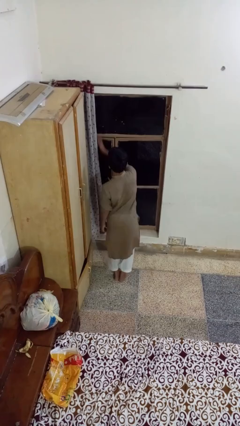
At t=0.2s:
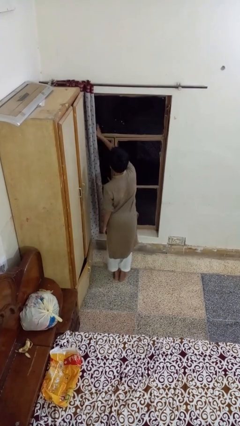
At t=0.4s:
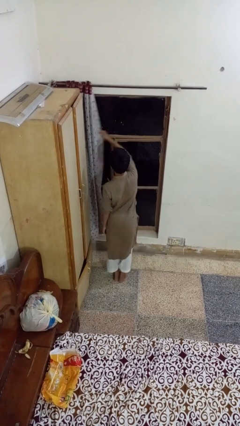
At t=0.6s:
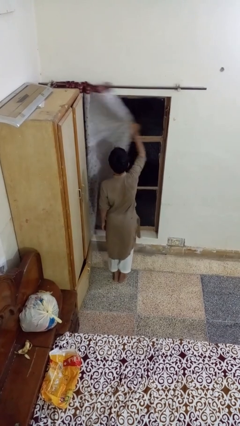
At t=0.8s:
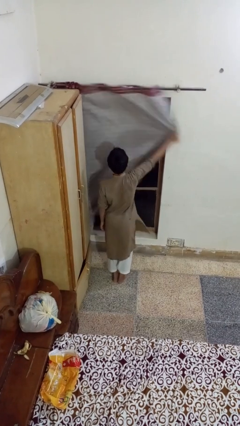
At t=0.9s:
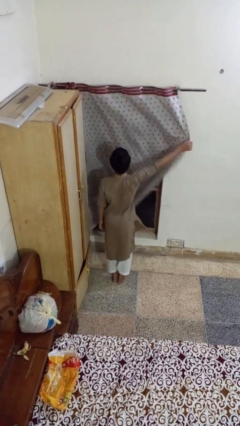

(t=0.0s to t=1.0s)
person closes curtains

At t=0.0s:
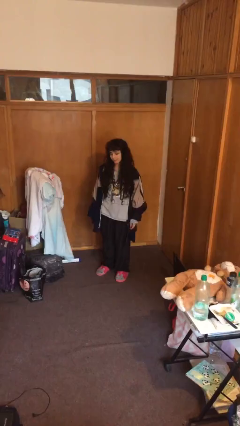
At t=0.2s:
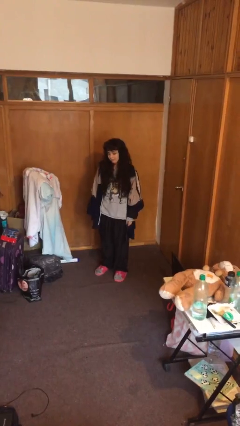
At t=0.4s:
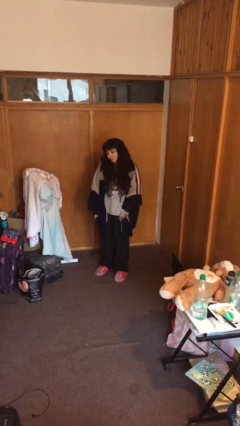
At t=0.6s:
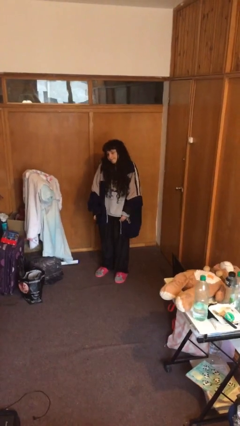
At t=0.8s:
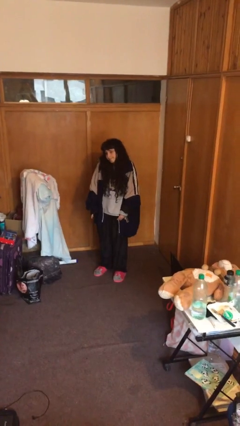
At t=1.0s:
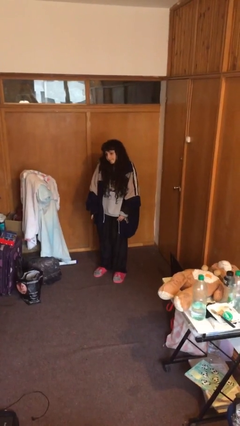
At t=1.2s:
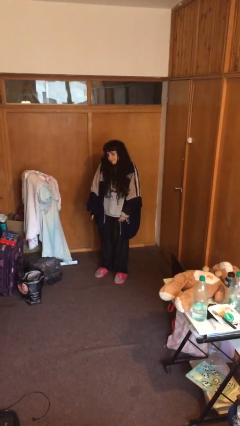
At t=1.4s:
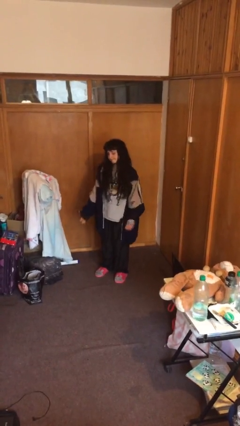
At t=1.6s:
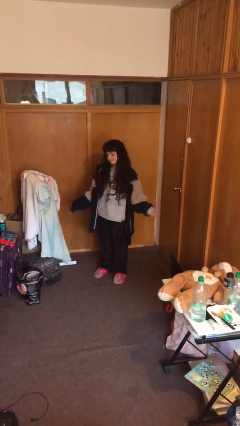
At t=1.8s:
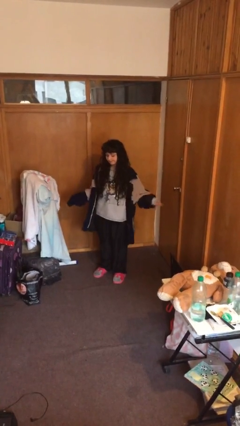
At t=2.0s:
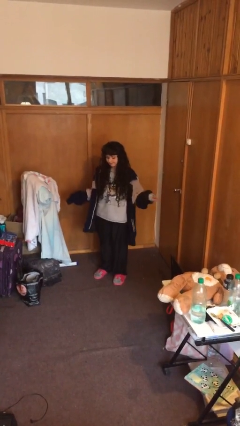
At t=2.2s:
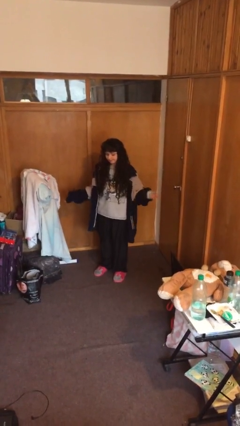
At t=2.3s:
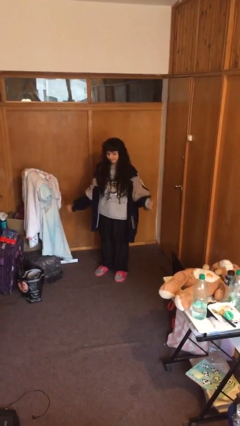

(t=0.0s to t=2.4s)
person shrugs

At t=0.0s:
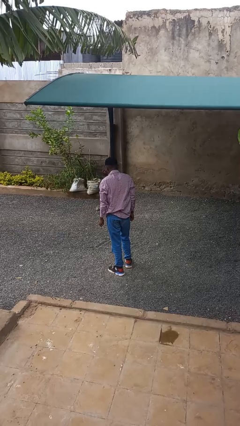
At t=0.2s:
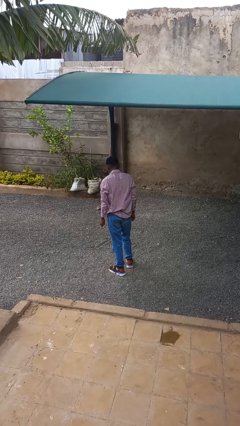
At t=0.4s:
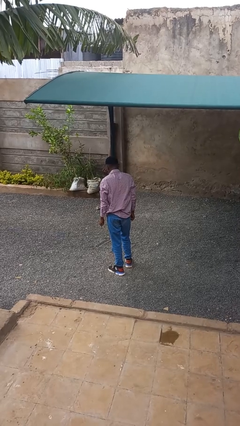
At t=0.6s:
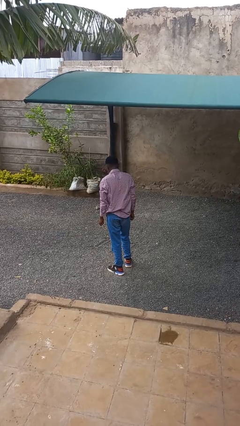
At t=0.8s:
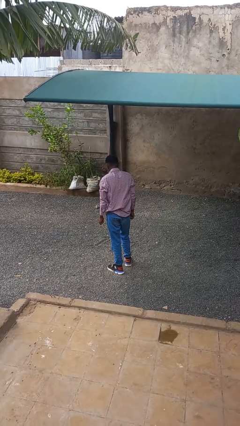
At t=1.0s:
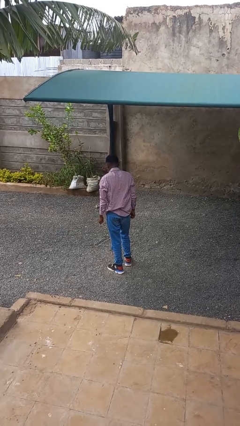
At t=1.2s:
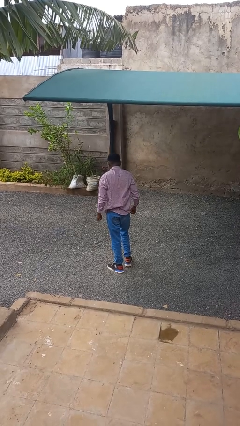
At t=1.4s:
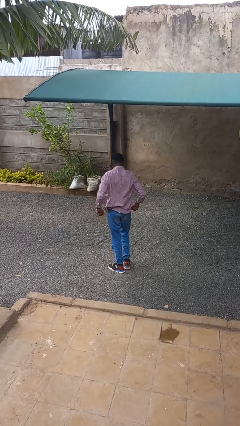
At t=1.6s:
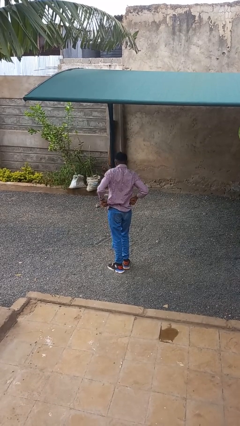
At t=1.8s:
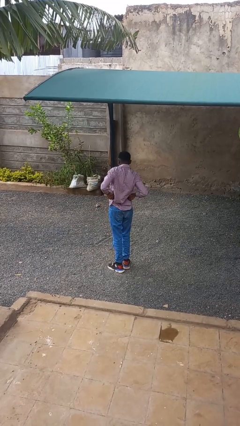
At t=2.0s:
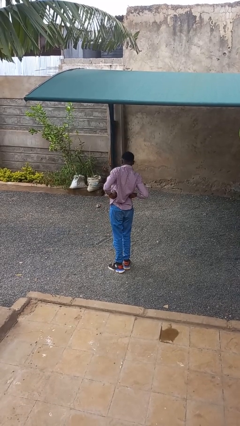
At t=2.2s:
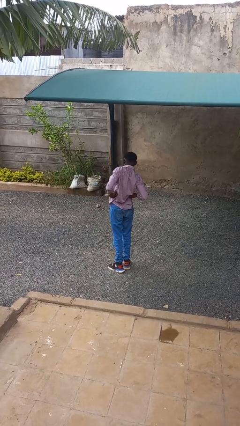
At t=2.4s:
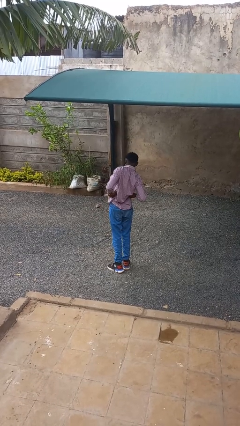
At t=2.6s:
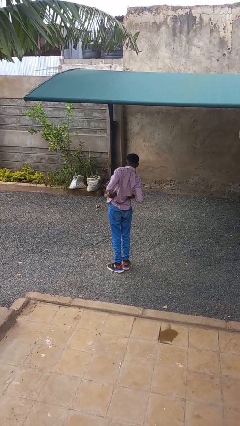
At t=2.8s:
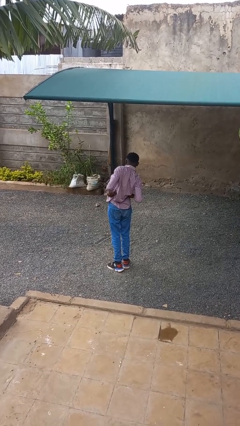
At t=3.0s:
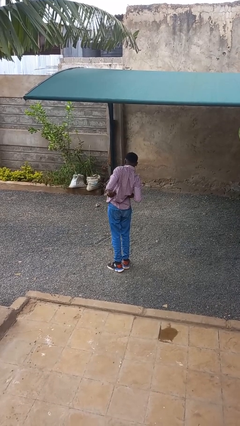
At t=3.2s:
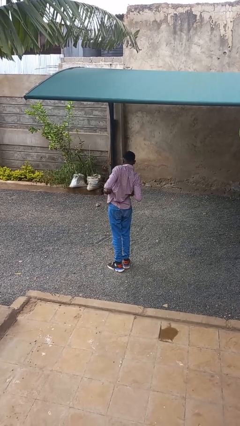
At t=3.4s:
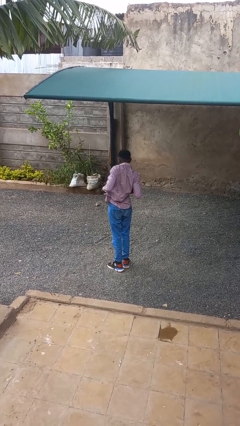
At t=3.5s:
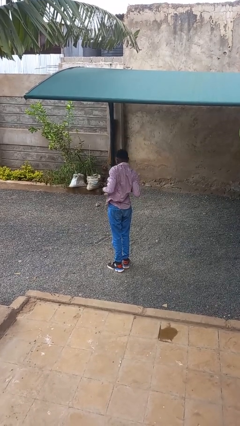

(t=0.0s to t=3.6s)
person stretches back

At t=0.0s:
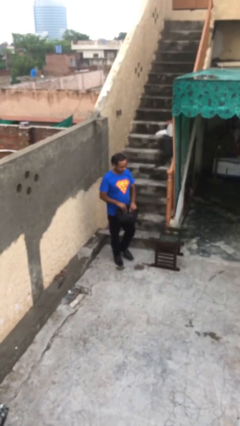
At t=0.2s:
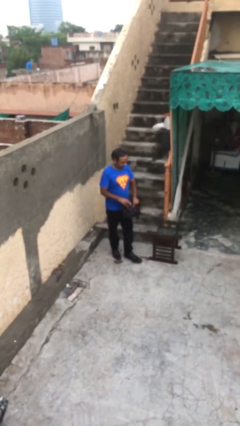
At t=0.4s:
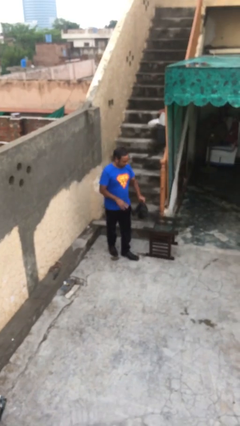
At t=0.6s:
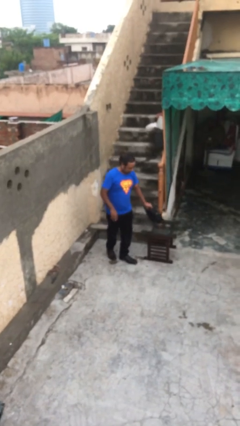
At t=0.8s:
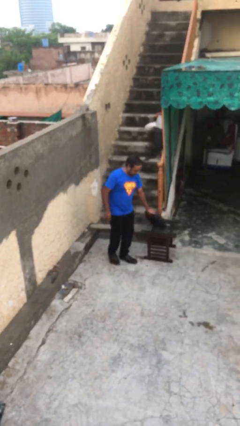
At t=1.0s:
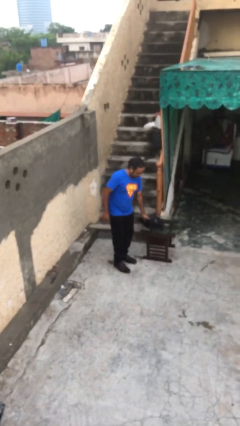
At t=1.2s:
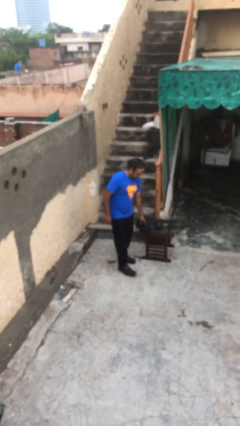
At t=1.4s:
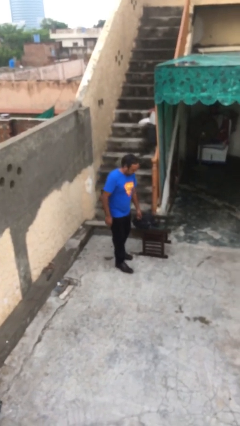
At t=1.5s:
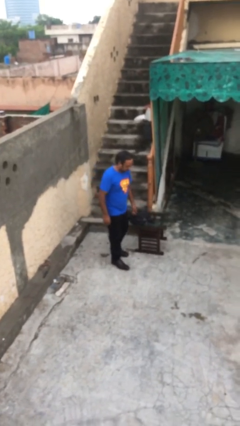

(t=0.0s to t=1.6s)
person puts down object on table

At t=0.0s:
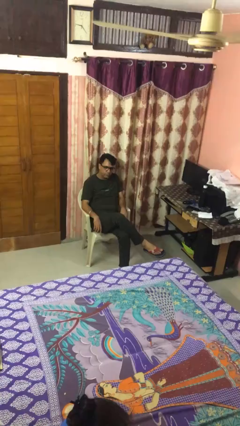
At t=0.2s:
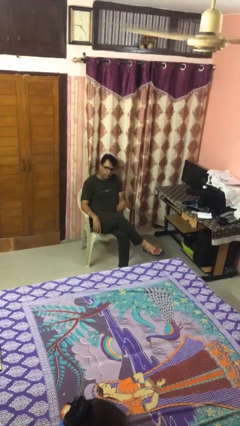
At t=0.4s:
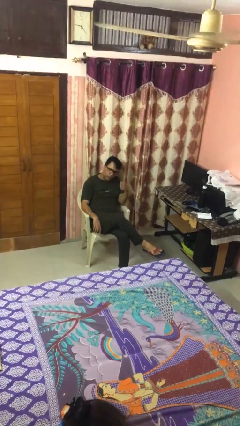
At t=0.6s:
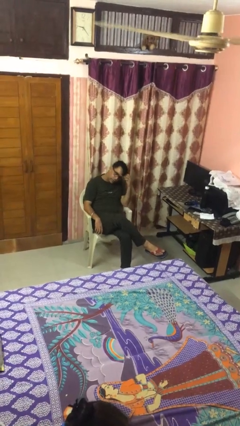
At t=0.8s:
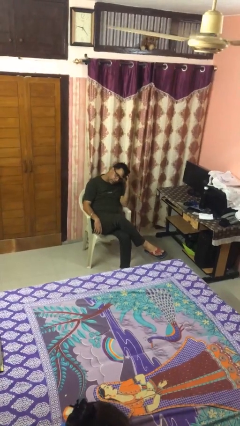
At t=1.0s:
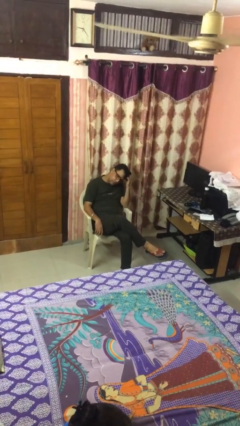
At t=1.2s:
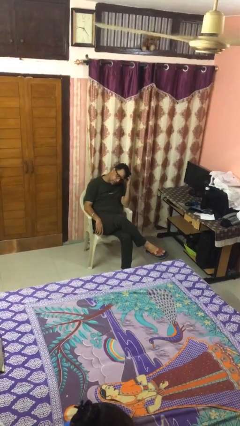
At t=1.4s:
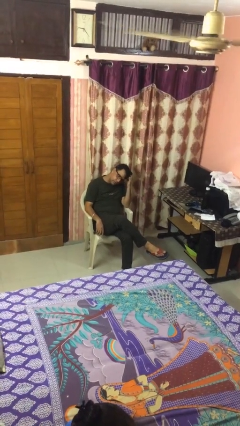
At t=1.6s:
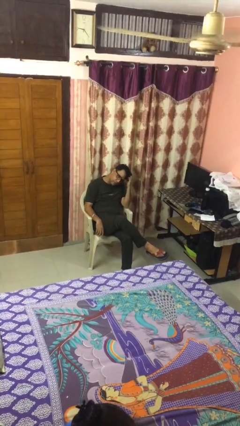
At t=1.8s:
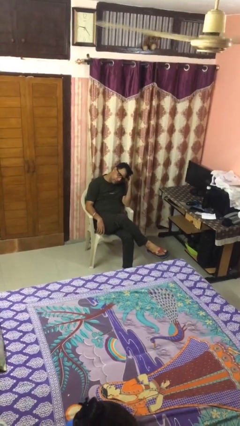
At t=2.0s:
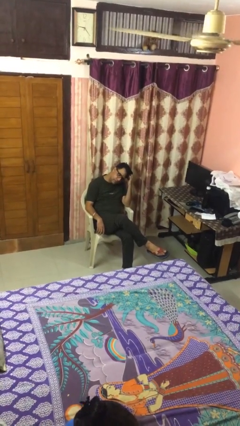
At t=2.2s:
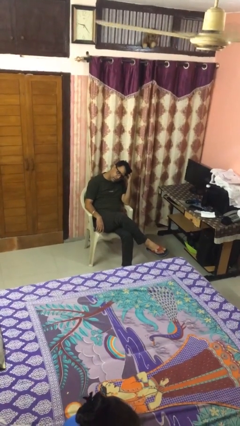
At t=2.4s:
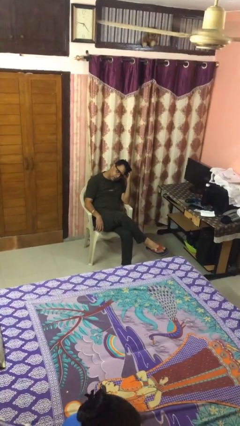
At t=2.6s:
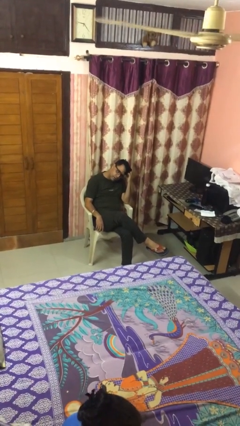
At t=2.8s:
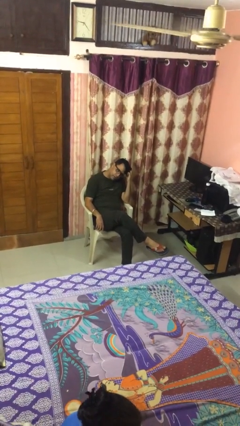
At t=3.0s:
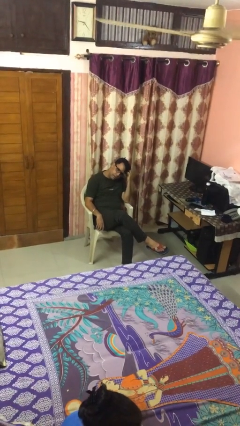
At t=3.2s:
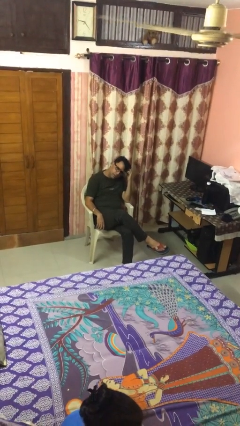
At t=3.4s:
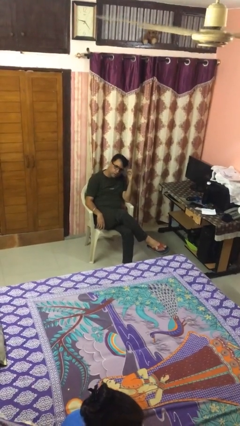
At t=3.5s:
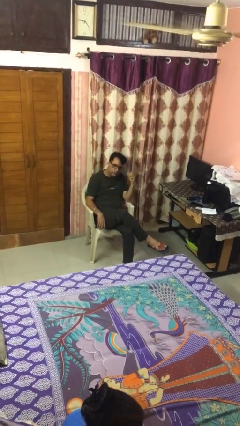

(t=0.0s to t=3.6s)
person scratches face

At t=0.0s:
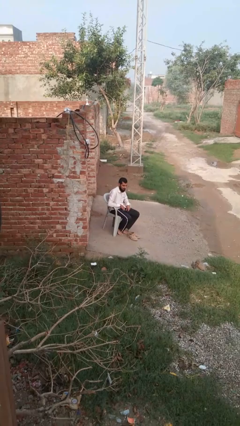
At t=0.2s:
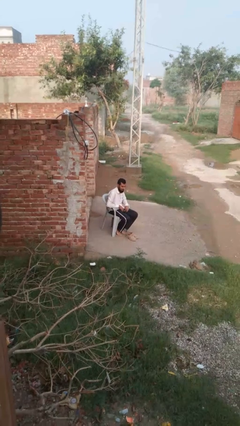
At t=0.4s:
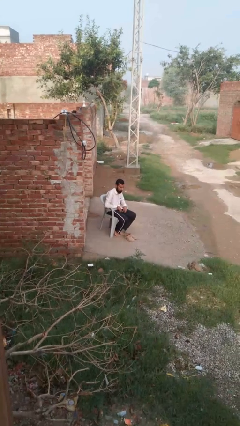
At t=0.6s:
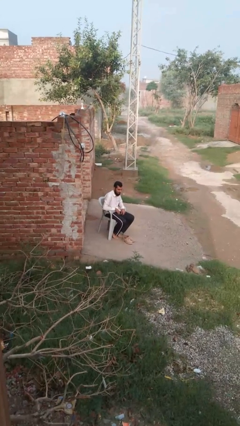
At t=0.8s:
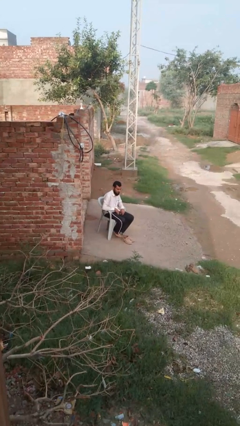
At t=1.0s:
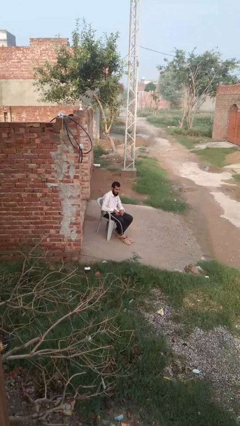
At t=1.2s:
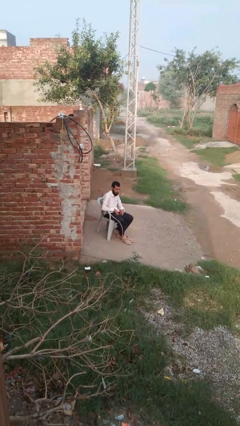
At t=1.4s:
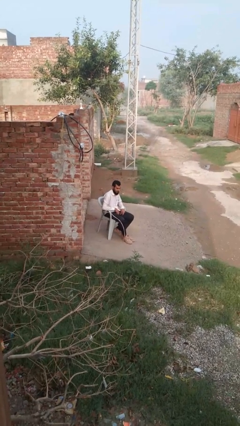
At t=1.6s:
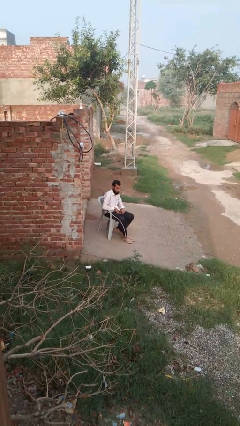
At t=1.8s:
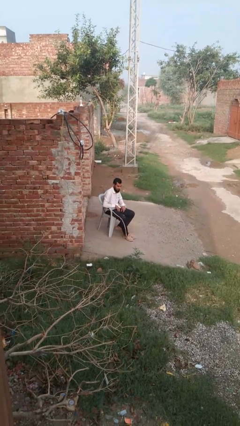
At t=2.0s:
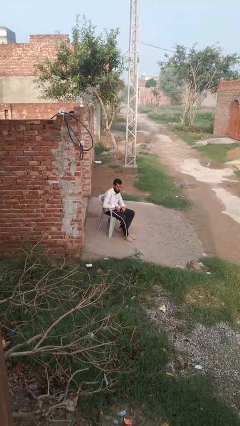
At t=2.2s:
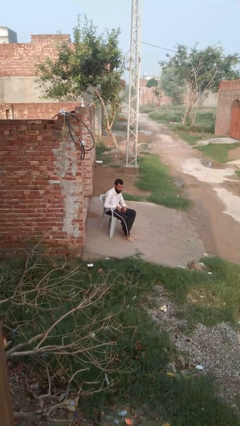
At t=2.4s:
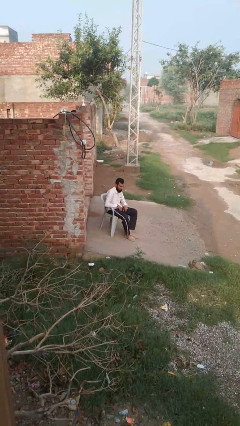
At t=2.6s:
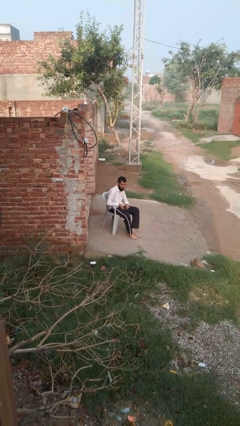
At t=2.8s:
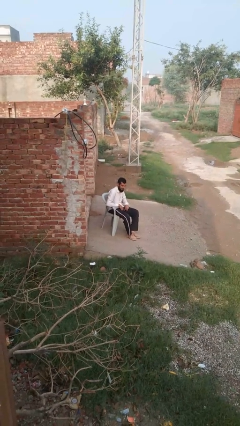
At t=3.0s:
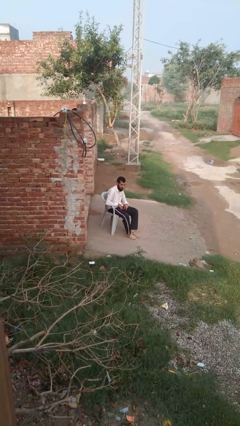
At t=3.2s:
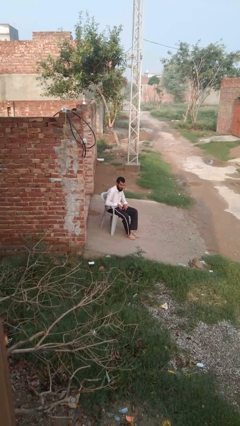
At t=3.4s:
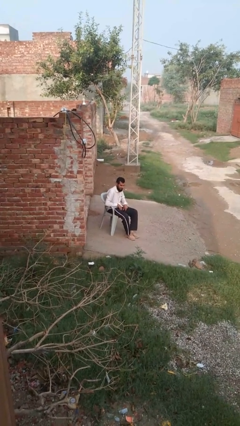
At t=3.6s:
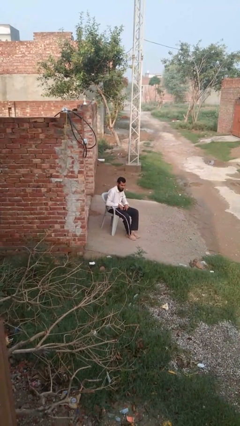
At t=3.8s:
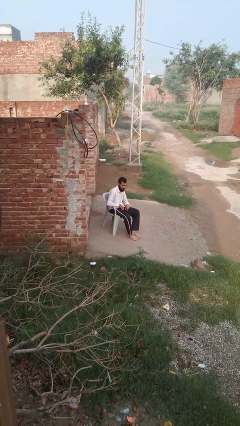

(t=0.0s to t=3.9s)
person puts on shoes

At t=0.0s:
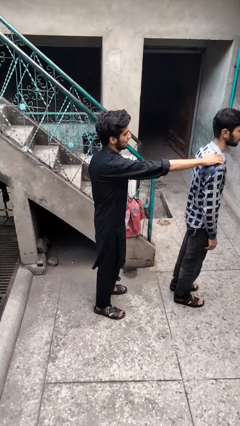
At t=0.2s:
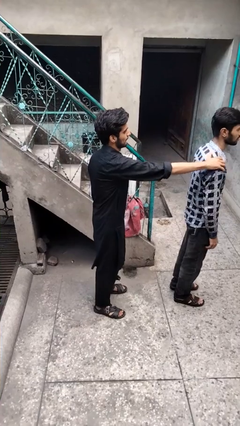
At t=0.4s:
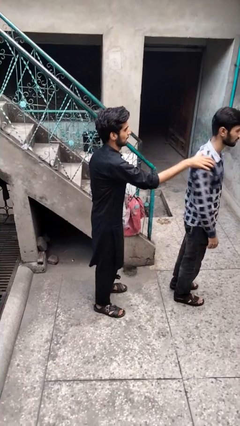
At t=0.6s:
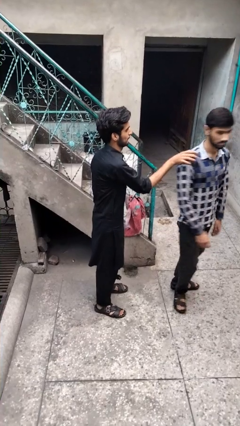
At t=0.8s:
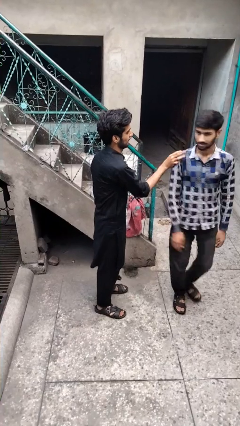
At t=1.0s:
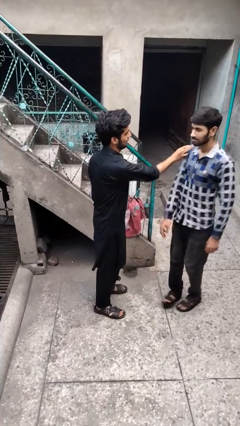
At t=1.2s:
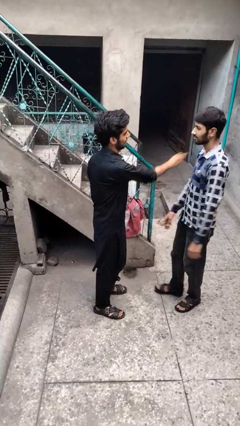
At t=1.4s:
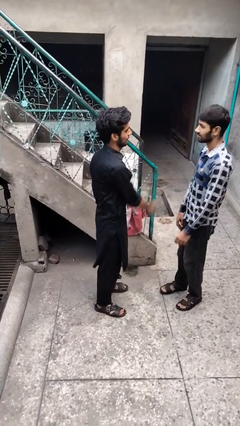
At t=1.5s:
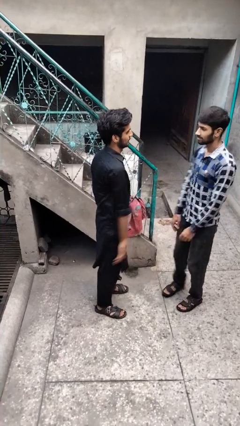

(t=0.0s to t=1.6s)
person spins person around
